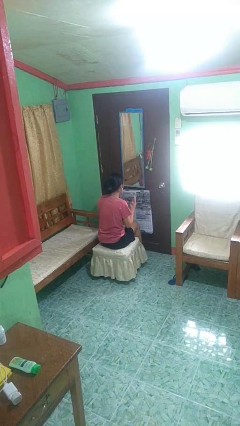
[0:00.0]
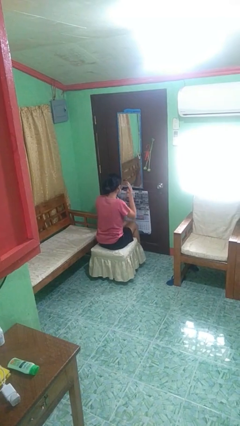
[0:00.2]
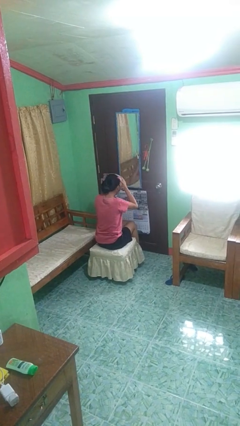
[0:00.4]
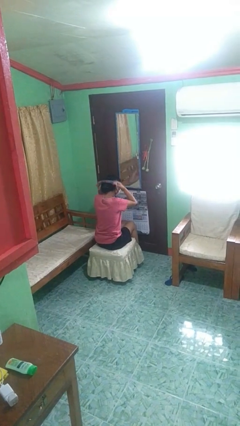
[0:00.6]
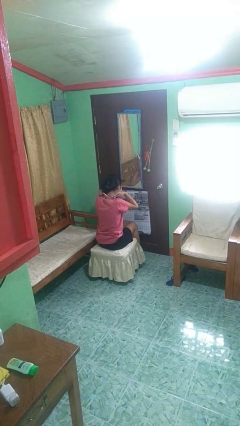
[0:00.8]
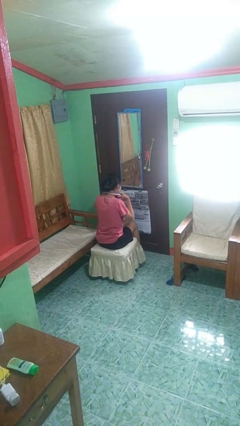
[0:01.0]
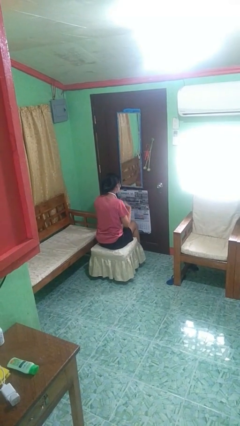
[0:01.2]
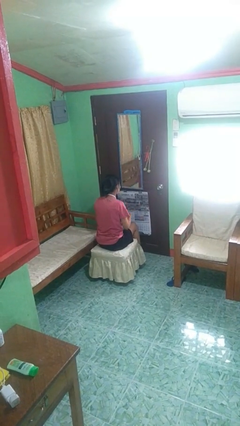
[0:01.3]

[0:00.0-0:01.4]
person puts on necklace

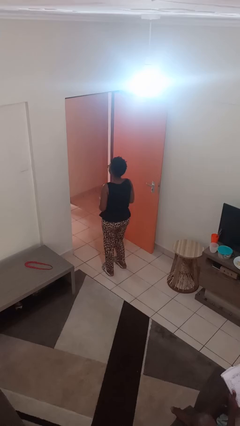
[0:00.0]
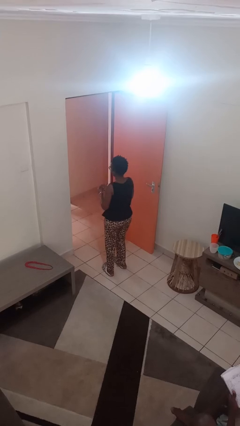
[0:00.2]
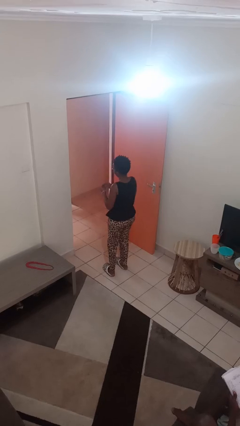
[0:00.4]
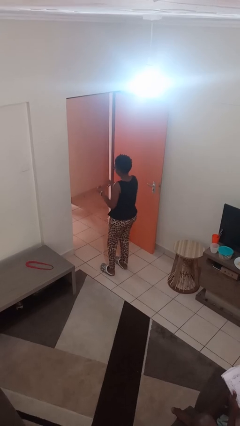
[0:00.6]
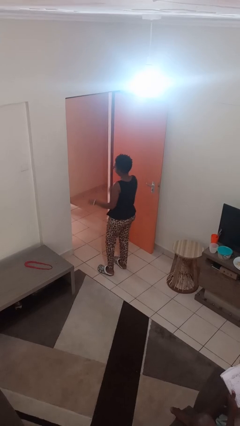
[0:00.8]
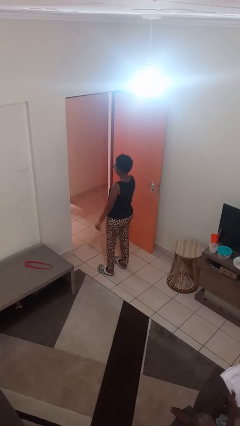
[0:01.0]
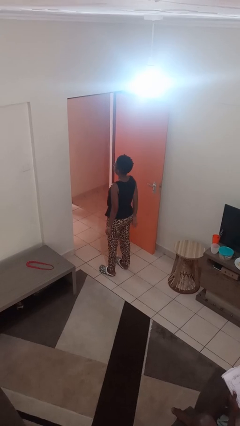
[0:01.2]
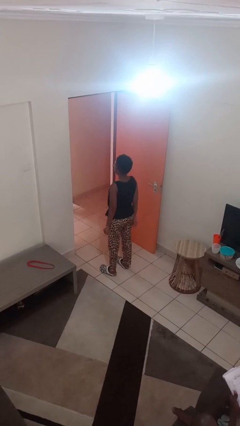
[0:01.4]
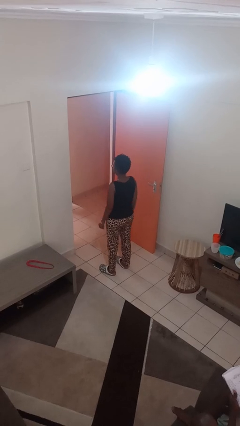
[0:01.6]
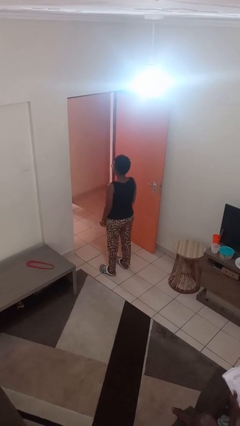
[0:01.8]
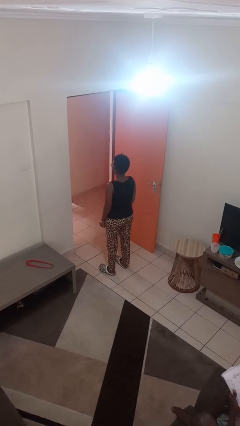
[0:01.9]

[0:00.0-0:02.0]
person takes off ring

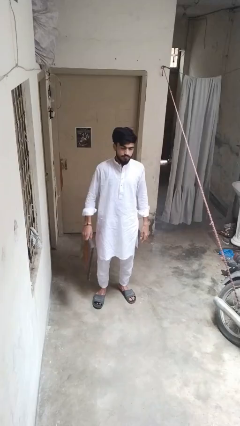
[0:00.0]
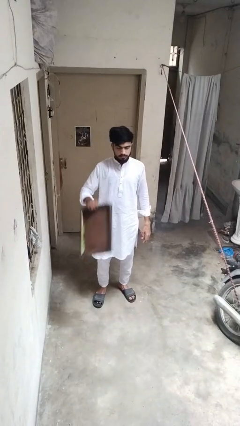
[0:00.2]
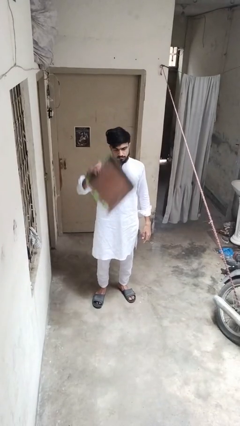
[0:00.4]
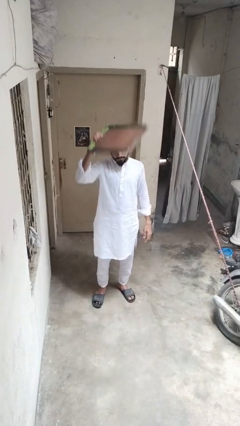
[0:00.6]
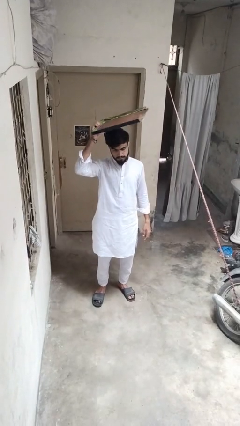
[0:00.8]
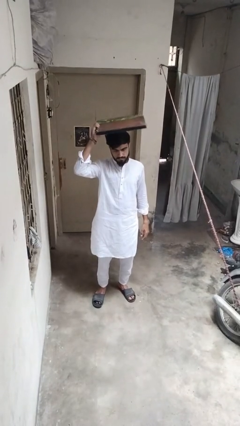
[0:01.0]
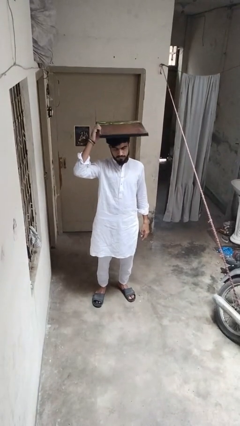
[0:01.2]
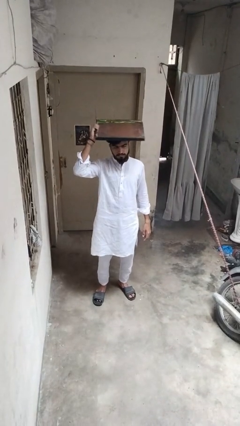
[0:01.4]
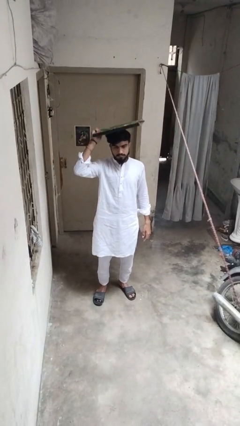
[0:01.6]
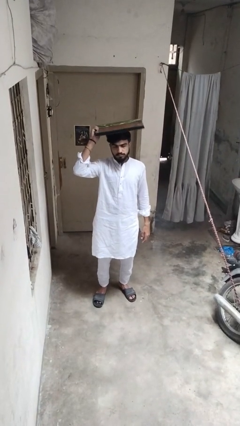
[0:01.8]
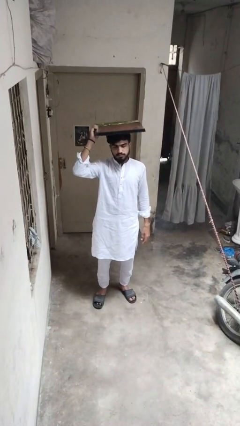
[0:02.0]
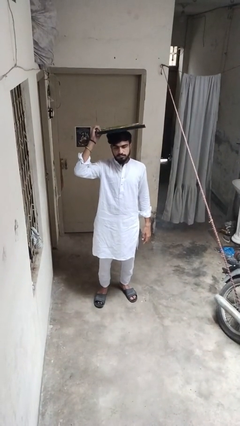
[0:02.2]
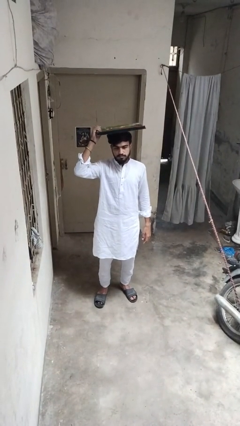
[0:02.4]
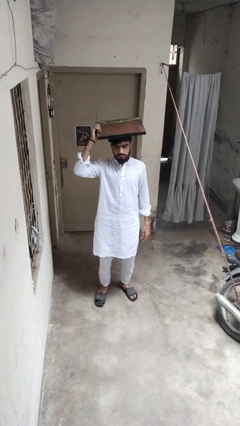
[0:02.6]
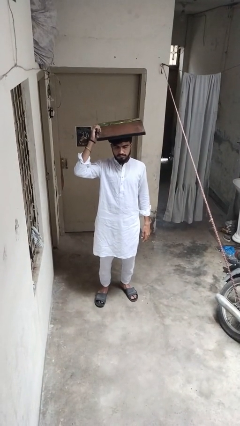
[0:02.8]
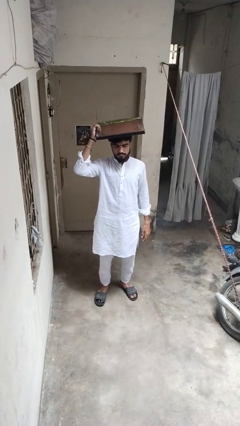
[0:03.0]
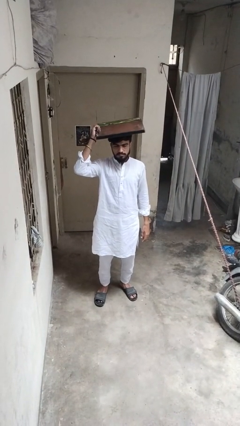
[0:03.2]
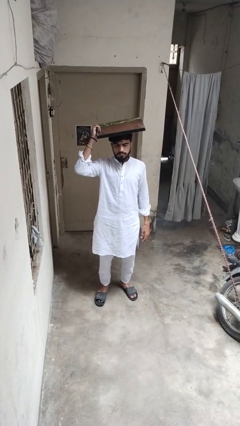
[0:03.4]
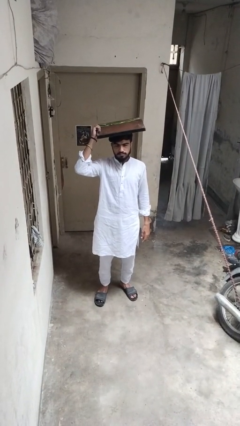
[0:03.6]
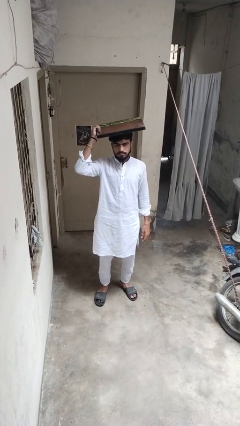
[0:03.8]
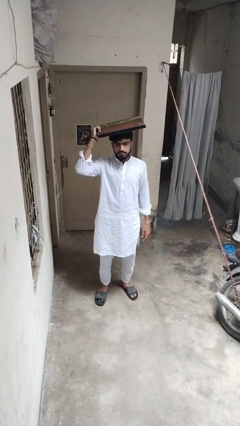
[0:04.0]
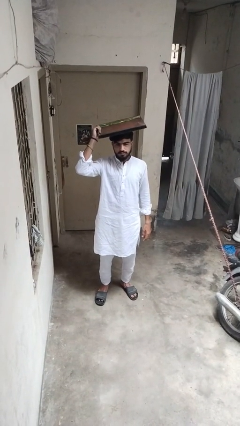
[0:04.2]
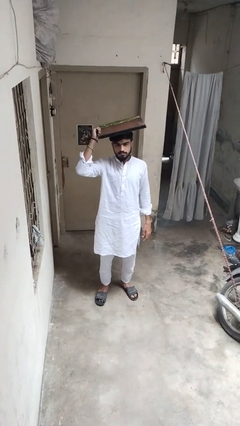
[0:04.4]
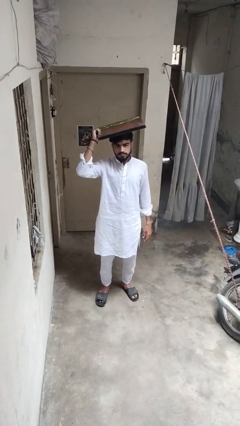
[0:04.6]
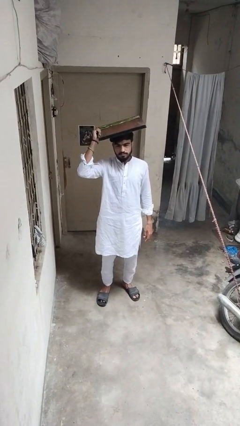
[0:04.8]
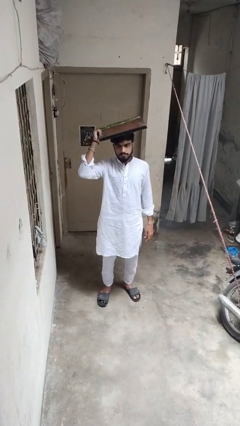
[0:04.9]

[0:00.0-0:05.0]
person holds object above head

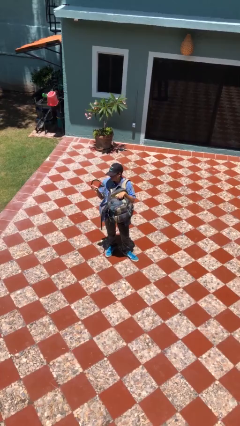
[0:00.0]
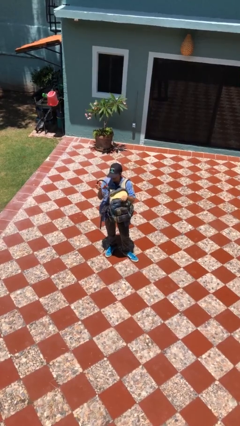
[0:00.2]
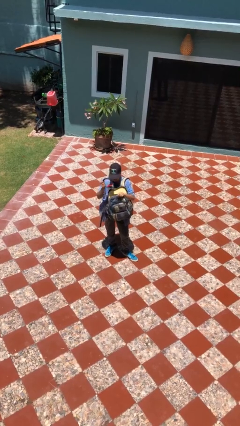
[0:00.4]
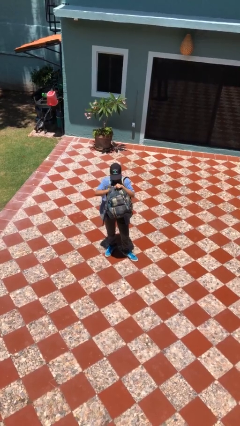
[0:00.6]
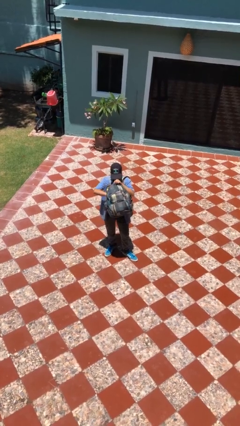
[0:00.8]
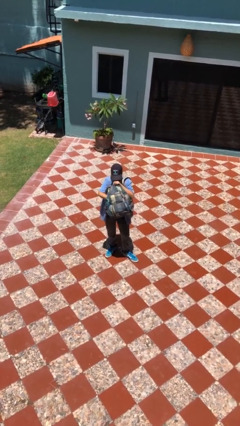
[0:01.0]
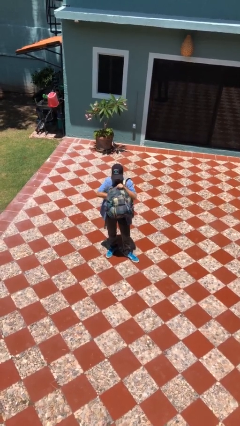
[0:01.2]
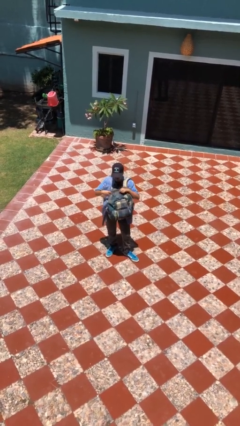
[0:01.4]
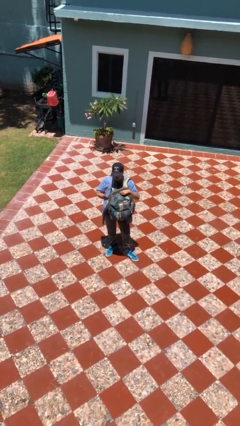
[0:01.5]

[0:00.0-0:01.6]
person puts object into backpack

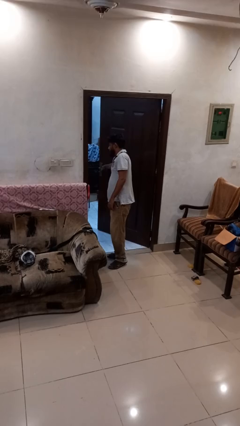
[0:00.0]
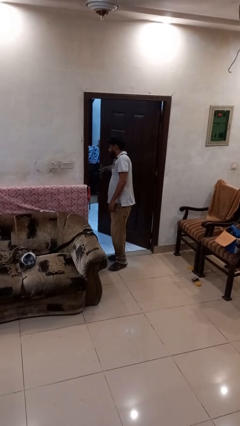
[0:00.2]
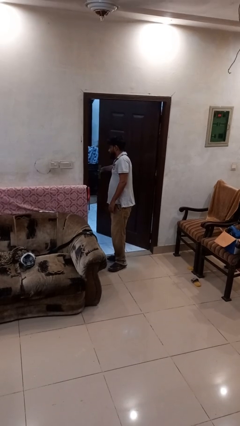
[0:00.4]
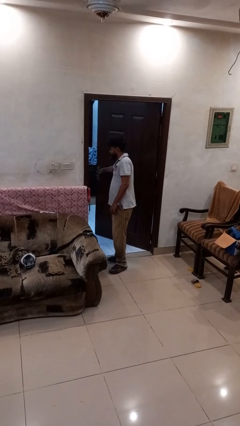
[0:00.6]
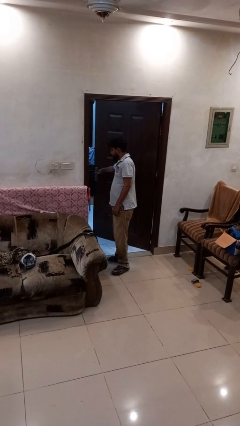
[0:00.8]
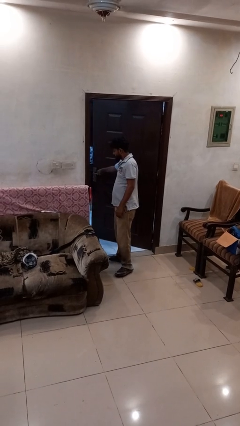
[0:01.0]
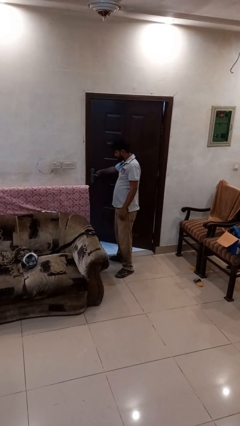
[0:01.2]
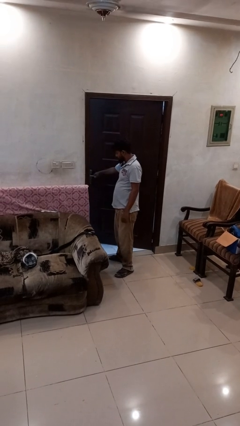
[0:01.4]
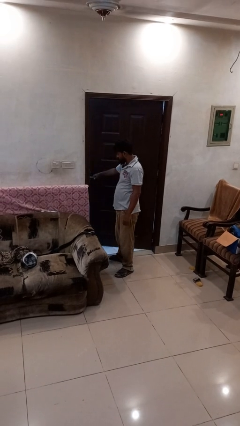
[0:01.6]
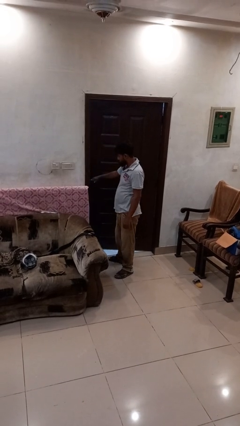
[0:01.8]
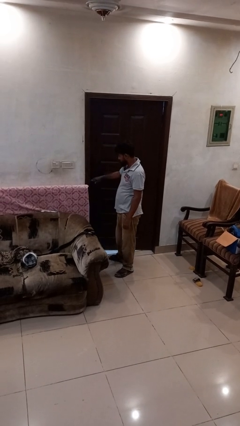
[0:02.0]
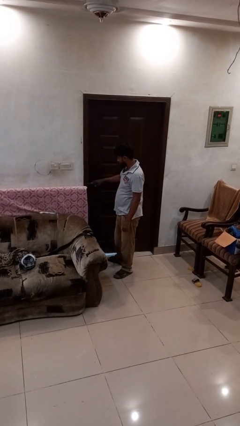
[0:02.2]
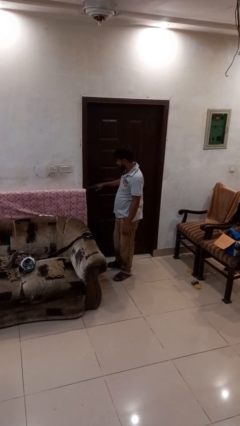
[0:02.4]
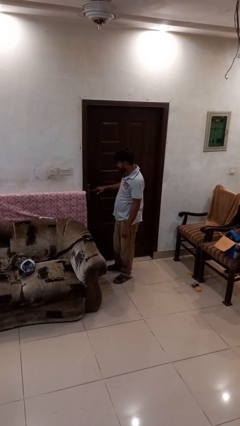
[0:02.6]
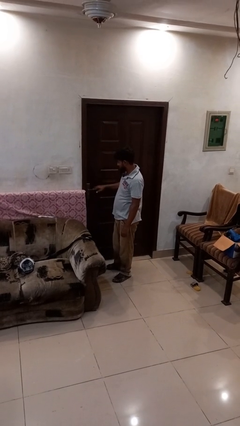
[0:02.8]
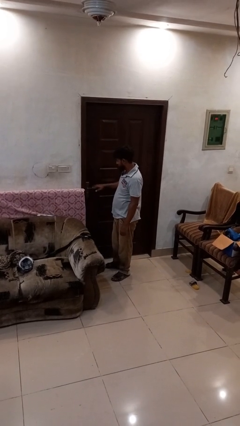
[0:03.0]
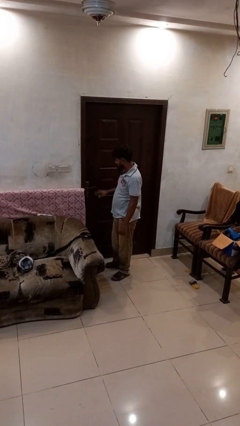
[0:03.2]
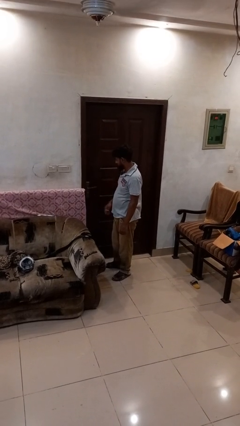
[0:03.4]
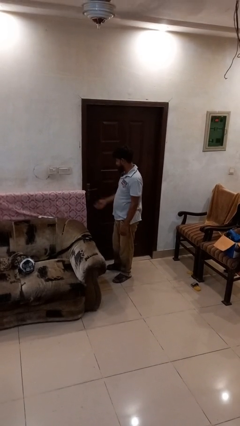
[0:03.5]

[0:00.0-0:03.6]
person closes facility door

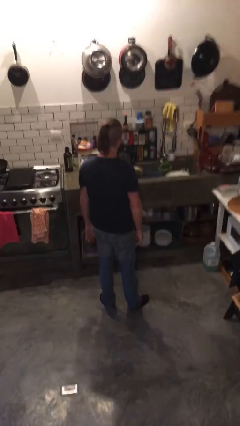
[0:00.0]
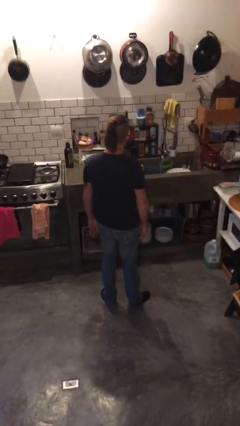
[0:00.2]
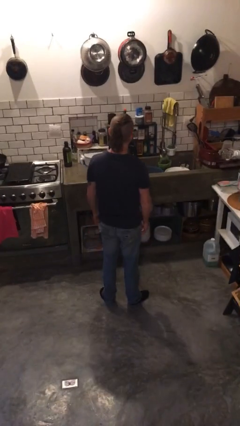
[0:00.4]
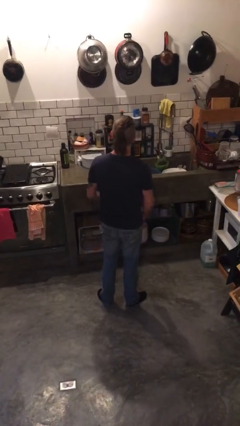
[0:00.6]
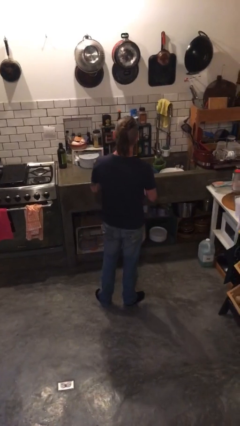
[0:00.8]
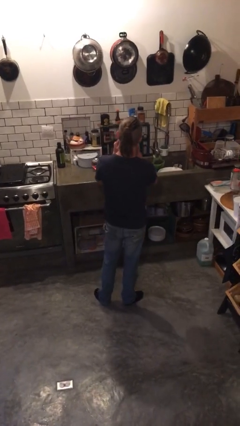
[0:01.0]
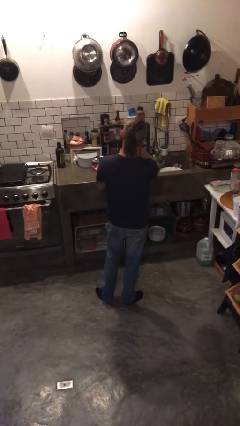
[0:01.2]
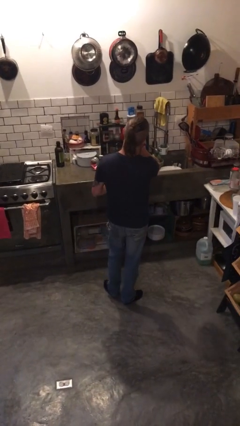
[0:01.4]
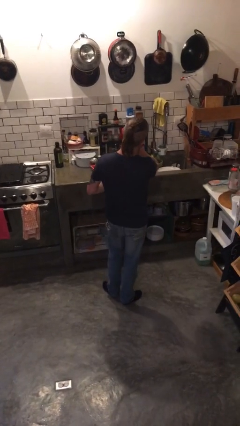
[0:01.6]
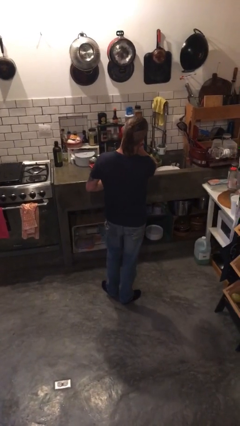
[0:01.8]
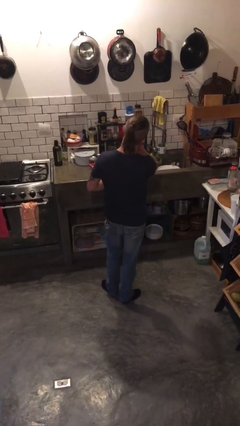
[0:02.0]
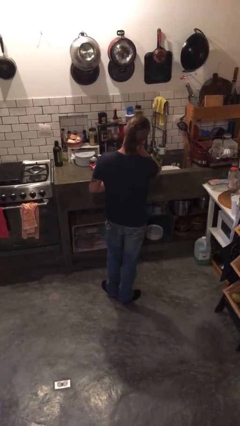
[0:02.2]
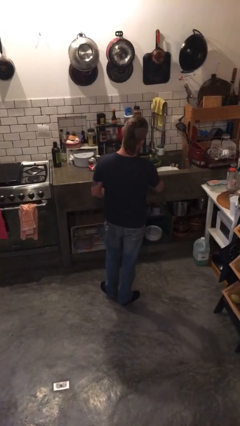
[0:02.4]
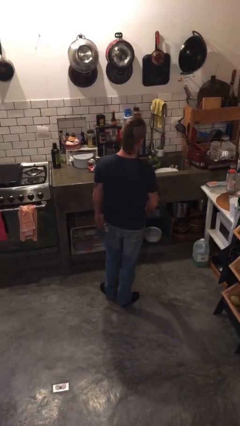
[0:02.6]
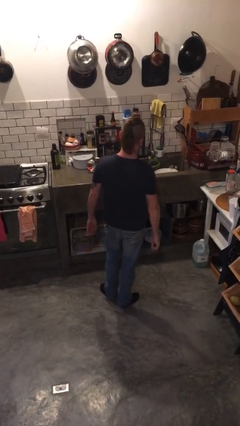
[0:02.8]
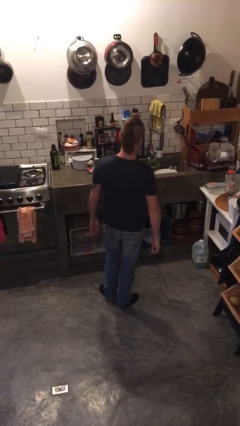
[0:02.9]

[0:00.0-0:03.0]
person yawns

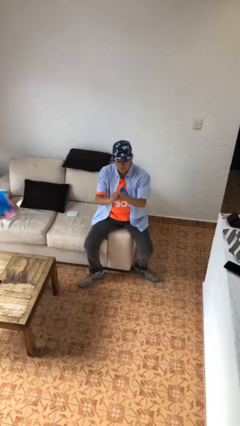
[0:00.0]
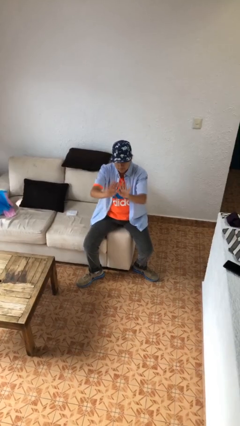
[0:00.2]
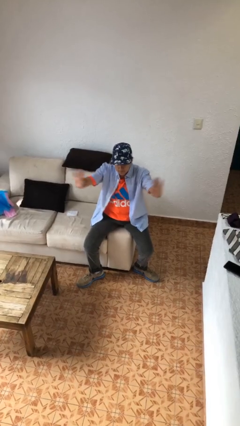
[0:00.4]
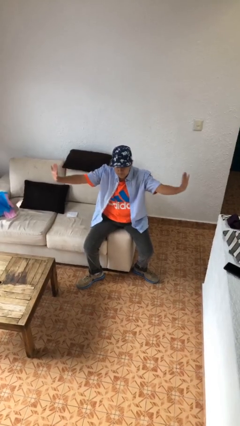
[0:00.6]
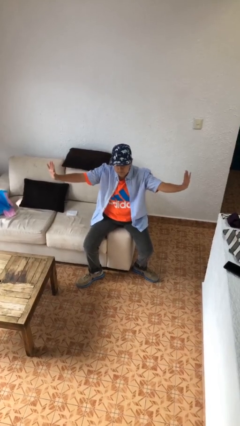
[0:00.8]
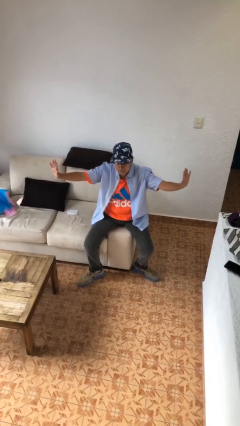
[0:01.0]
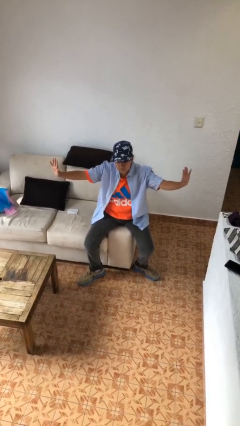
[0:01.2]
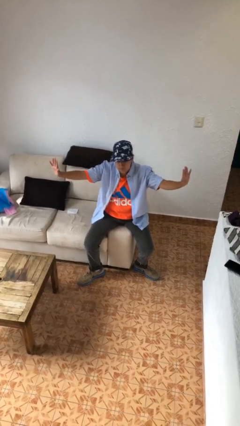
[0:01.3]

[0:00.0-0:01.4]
person gestures zoom in
